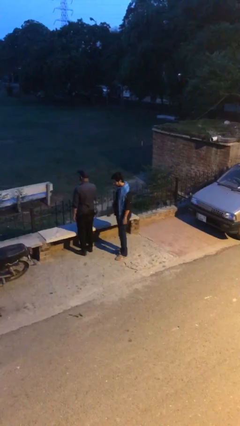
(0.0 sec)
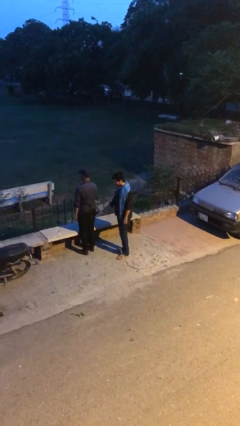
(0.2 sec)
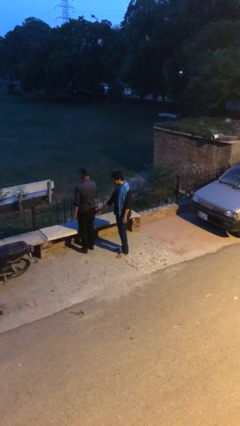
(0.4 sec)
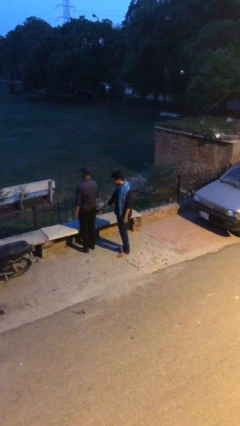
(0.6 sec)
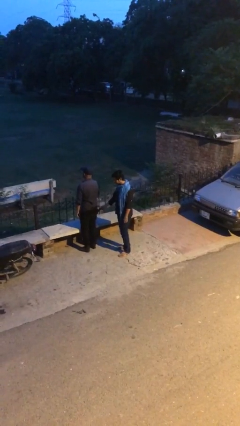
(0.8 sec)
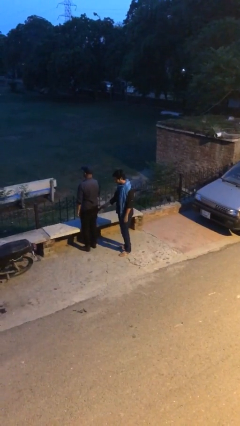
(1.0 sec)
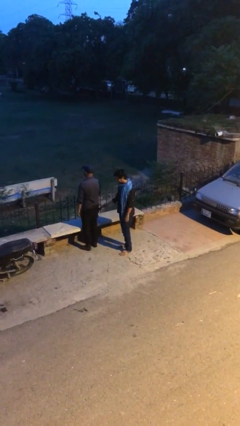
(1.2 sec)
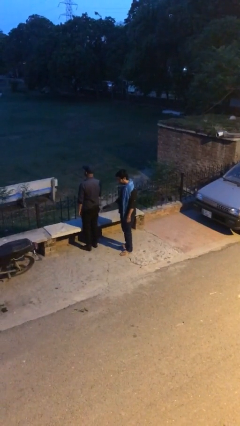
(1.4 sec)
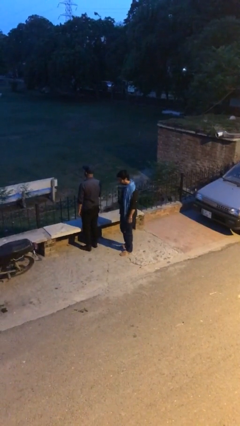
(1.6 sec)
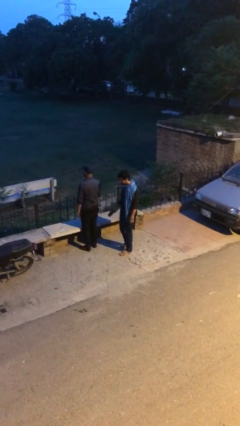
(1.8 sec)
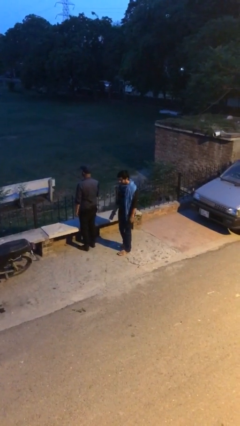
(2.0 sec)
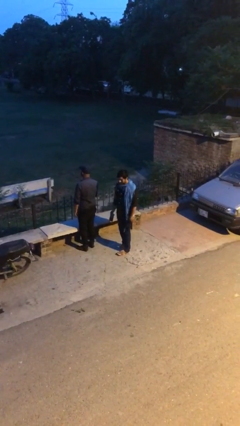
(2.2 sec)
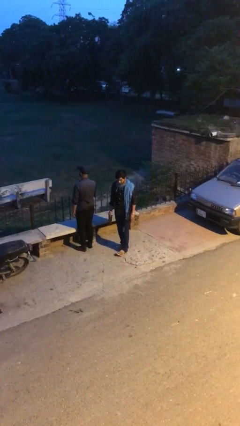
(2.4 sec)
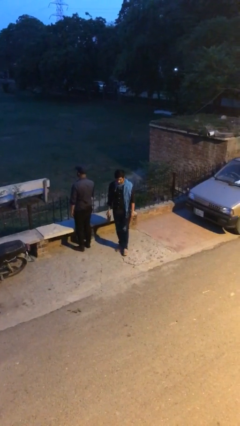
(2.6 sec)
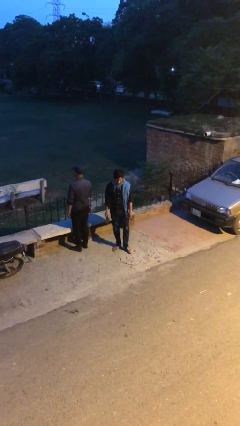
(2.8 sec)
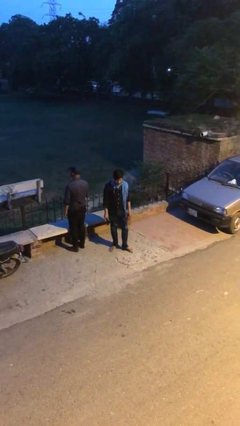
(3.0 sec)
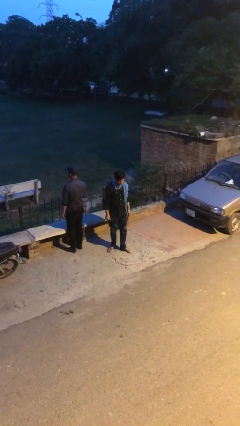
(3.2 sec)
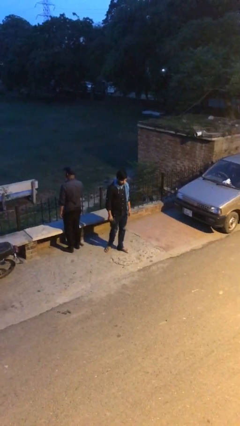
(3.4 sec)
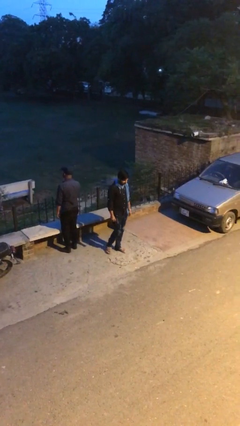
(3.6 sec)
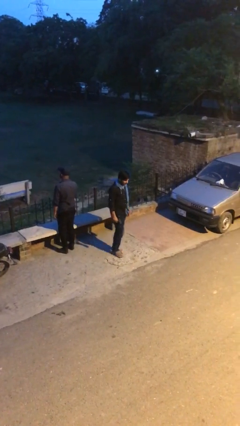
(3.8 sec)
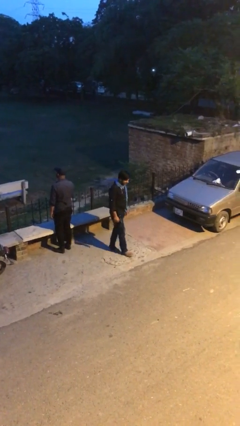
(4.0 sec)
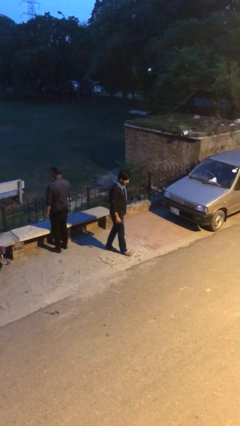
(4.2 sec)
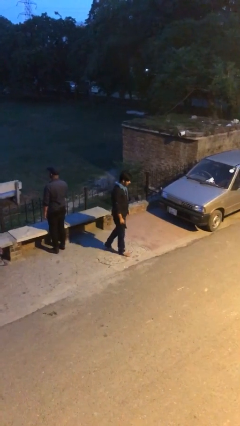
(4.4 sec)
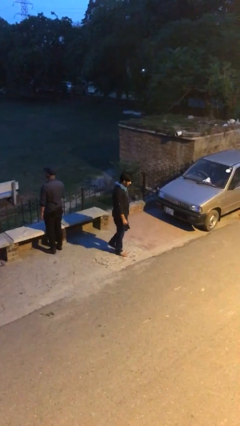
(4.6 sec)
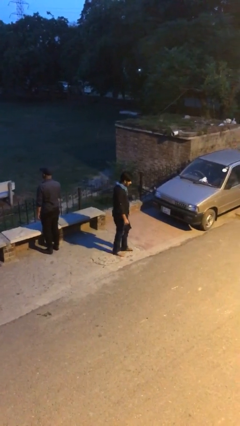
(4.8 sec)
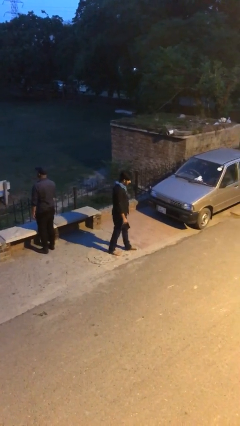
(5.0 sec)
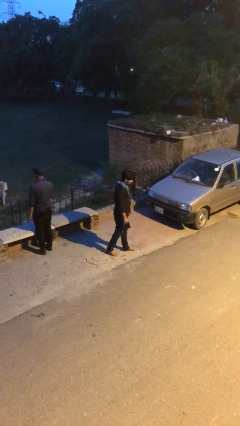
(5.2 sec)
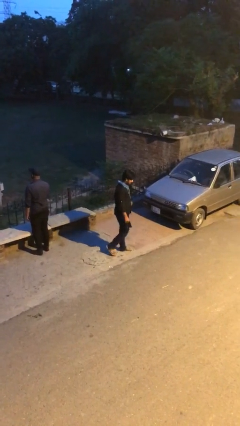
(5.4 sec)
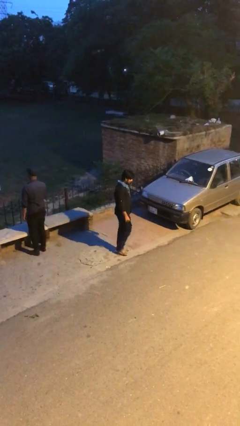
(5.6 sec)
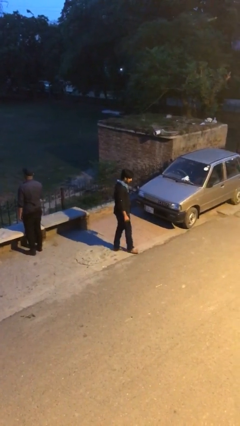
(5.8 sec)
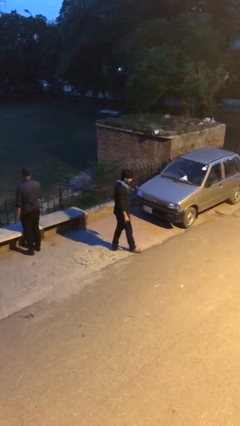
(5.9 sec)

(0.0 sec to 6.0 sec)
person steals object from person

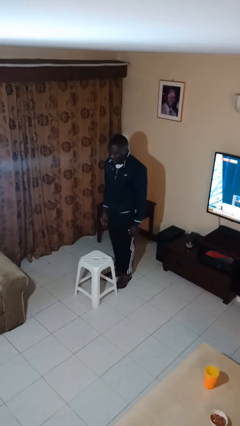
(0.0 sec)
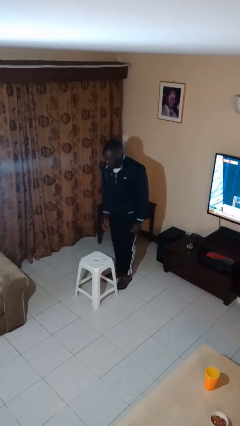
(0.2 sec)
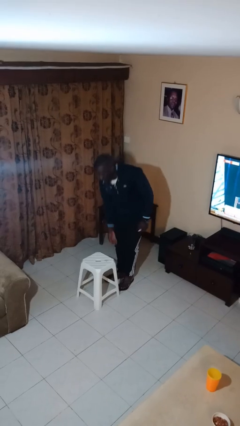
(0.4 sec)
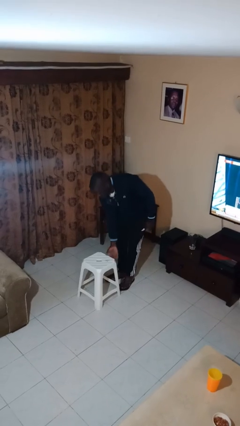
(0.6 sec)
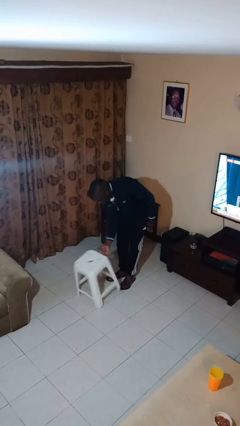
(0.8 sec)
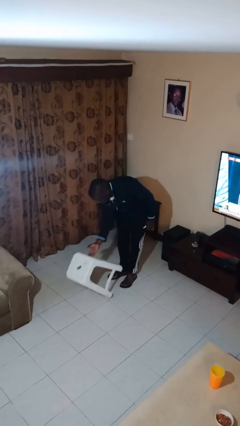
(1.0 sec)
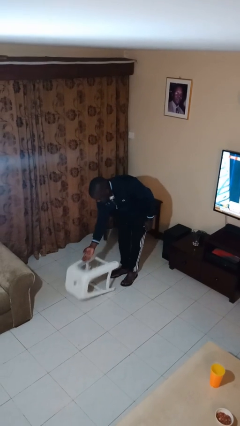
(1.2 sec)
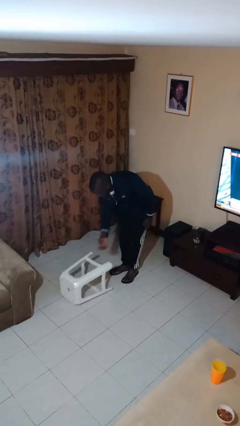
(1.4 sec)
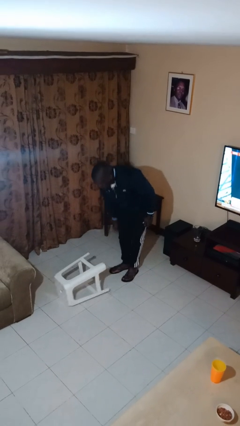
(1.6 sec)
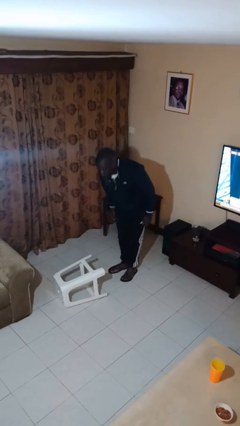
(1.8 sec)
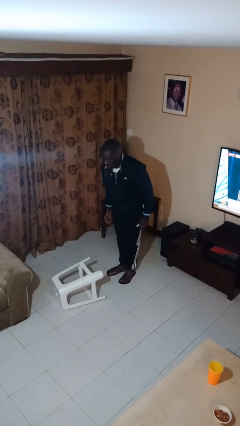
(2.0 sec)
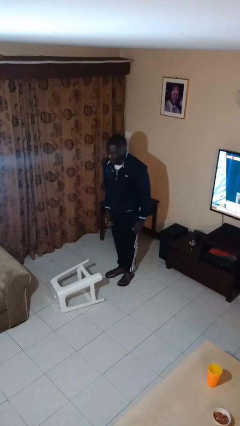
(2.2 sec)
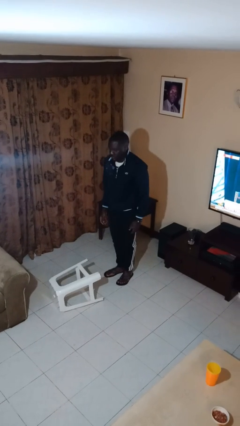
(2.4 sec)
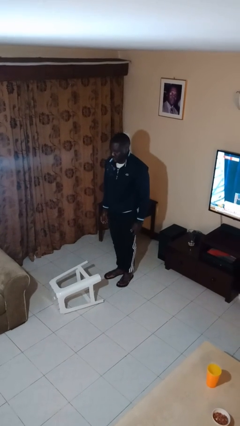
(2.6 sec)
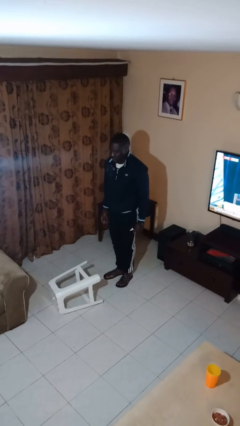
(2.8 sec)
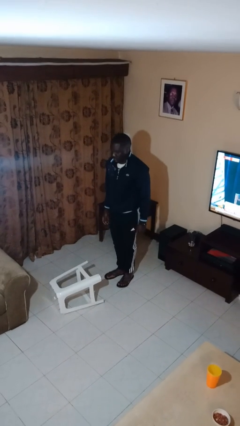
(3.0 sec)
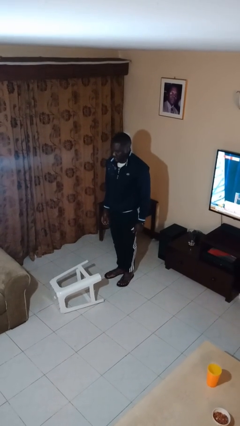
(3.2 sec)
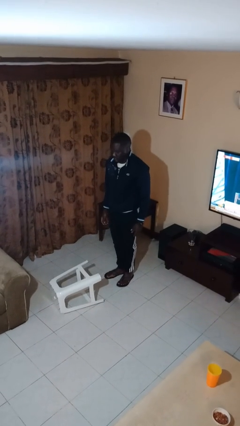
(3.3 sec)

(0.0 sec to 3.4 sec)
person knocks over furniture

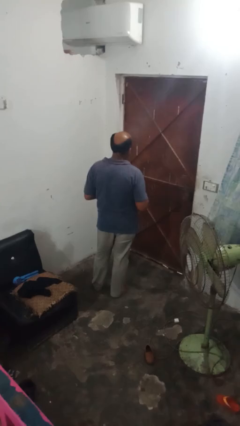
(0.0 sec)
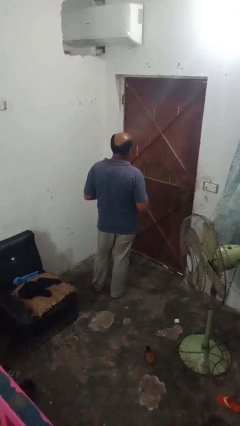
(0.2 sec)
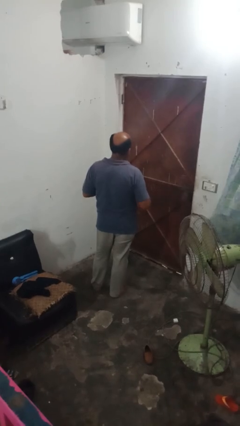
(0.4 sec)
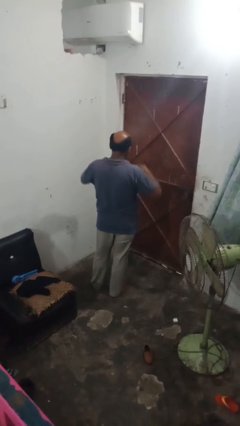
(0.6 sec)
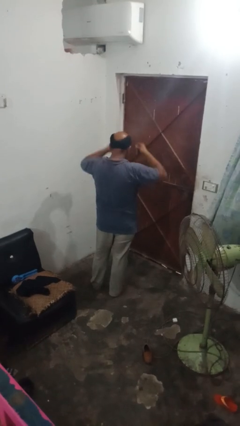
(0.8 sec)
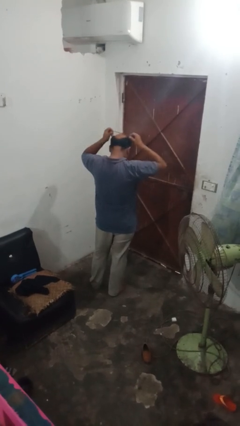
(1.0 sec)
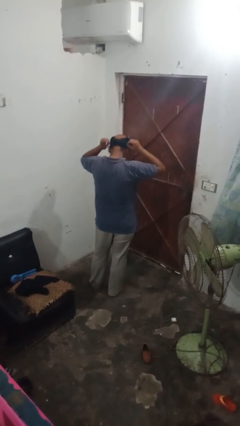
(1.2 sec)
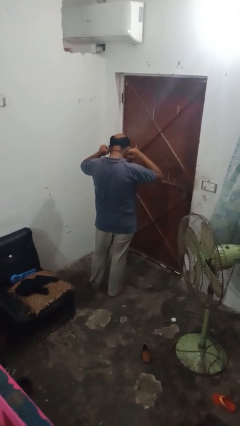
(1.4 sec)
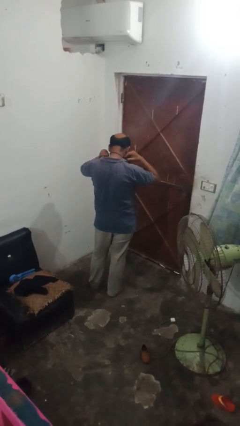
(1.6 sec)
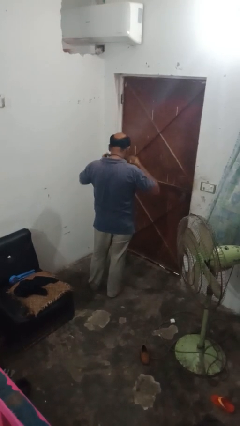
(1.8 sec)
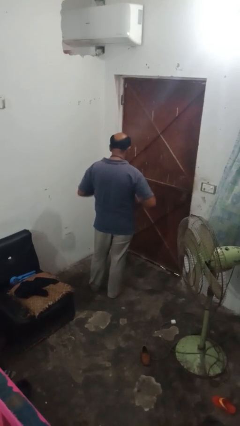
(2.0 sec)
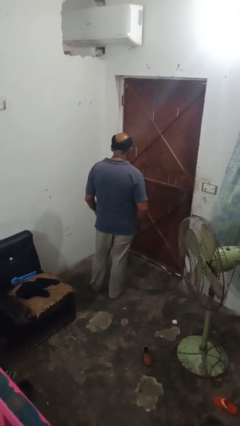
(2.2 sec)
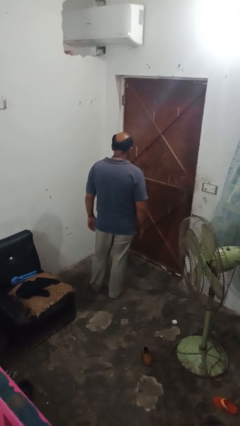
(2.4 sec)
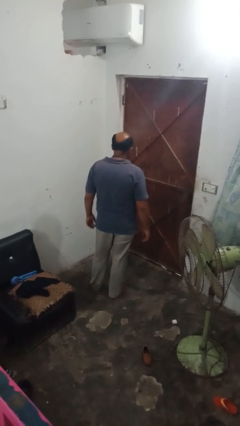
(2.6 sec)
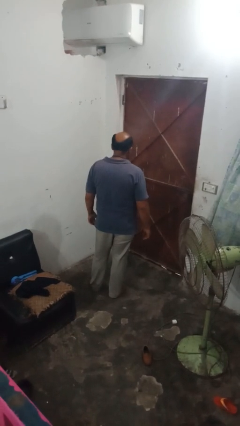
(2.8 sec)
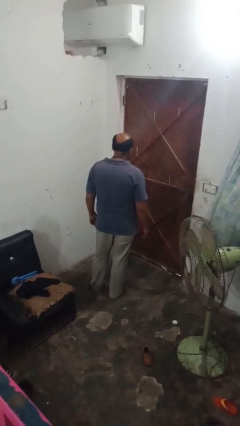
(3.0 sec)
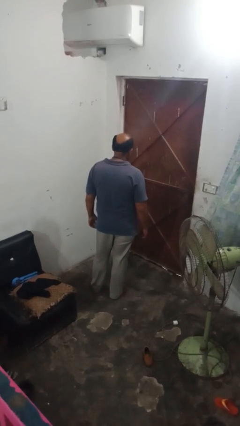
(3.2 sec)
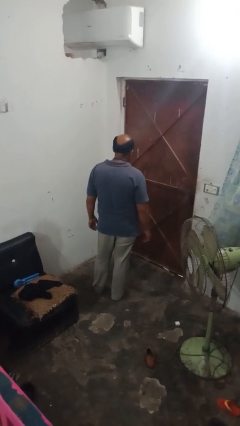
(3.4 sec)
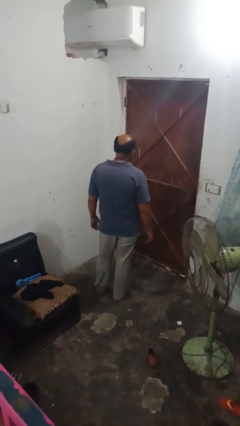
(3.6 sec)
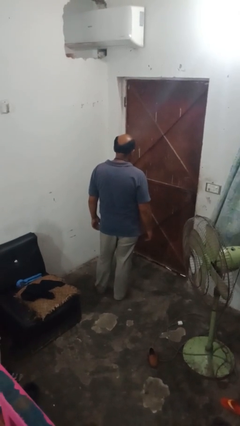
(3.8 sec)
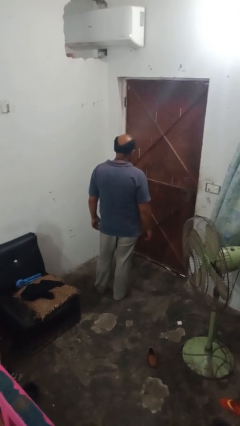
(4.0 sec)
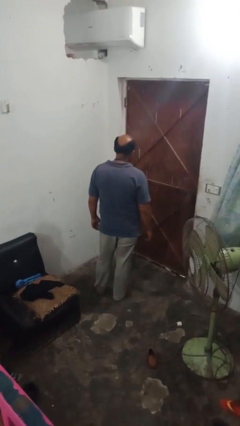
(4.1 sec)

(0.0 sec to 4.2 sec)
person puts on necklace

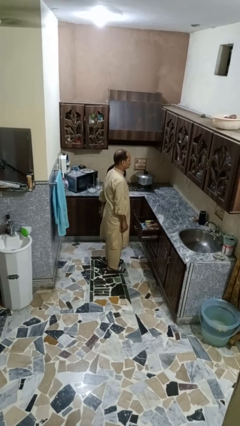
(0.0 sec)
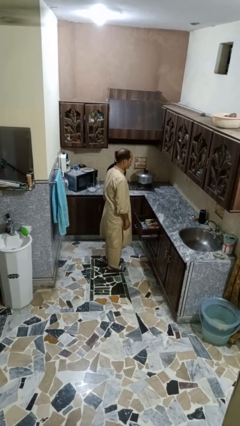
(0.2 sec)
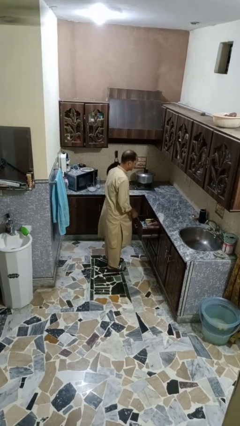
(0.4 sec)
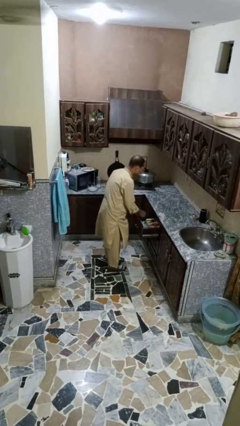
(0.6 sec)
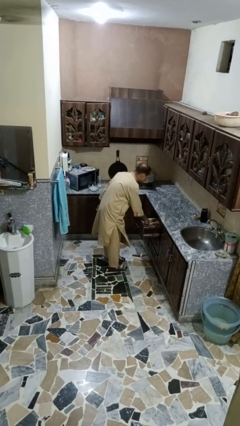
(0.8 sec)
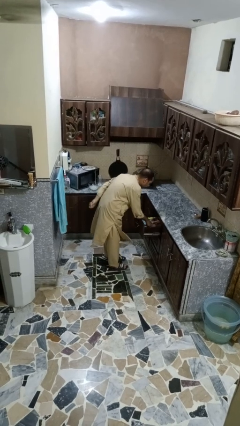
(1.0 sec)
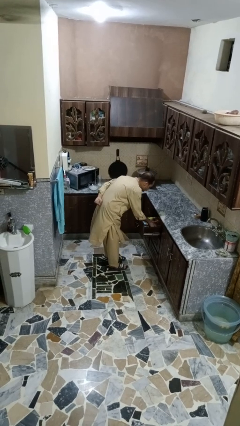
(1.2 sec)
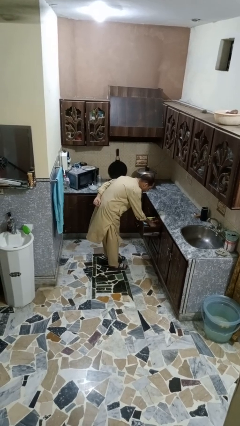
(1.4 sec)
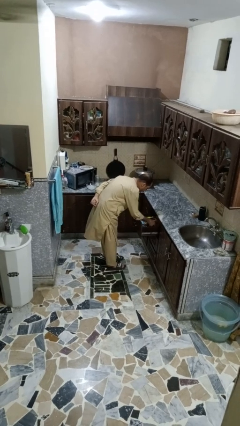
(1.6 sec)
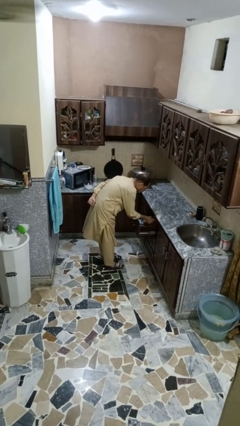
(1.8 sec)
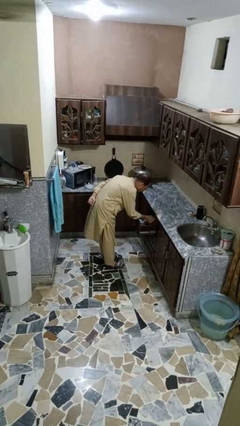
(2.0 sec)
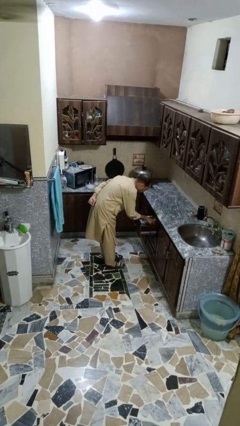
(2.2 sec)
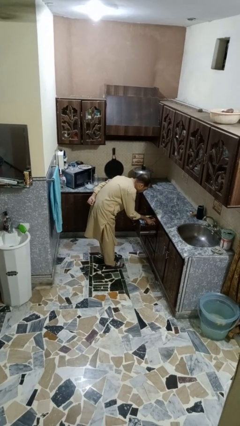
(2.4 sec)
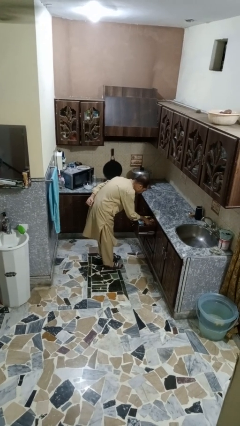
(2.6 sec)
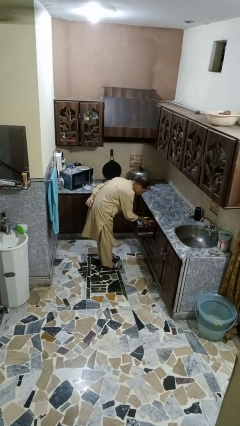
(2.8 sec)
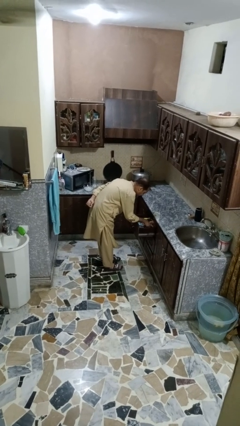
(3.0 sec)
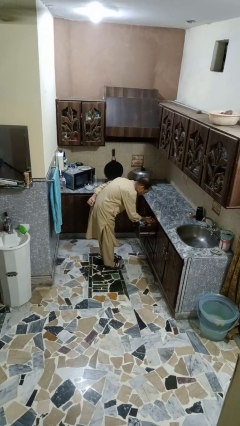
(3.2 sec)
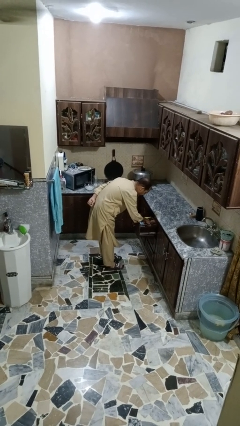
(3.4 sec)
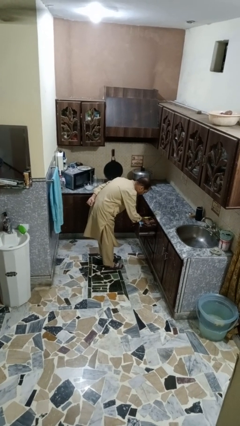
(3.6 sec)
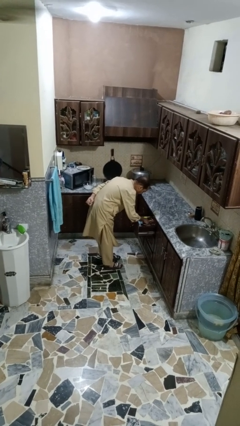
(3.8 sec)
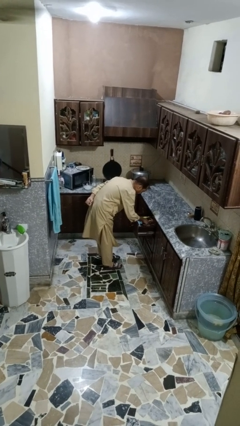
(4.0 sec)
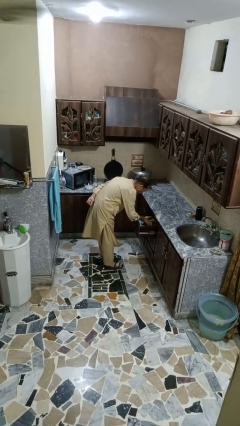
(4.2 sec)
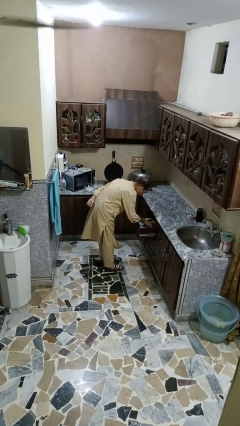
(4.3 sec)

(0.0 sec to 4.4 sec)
person searches in kitchen drawer
